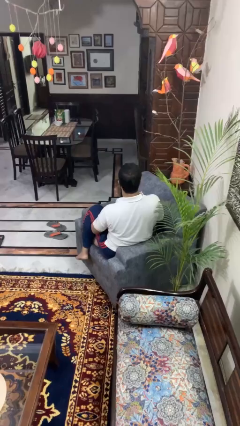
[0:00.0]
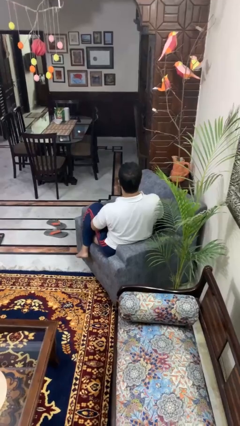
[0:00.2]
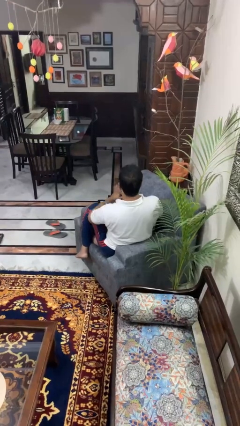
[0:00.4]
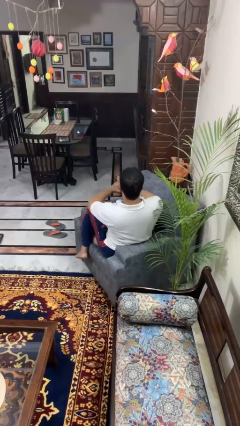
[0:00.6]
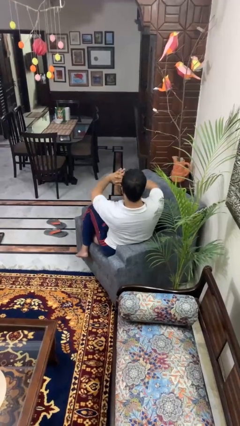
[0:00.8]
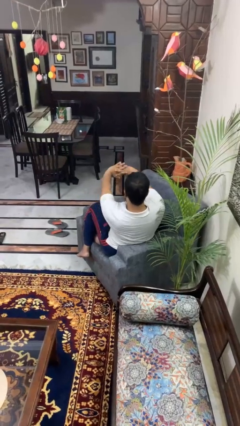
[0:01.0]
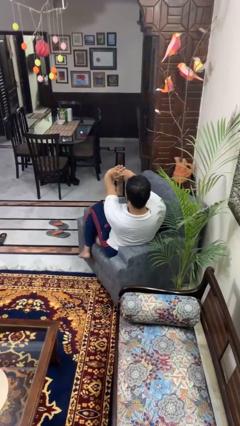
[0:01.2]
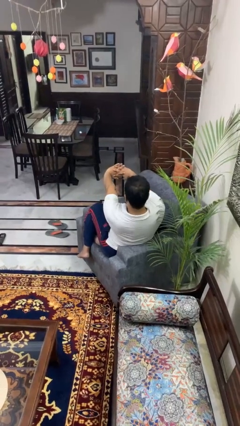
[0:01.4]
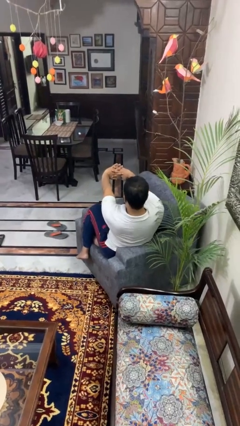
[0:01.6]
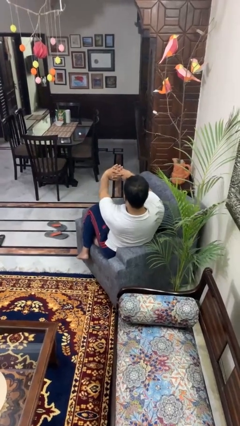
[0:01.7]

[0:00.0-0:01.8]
person cracks knuckles

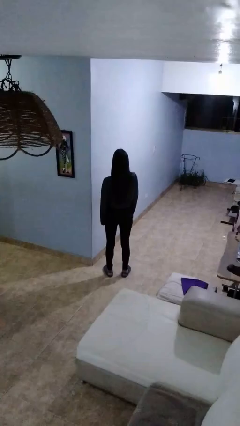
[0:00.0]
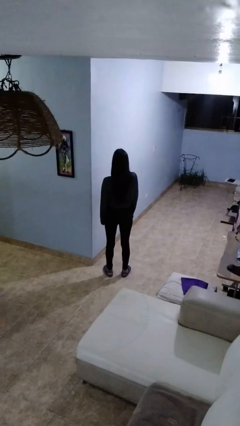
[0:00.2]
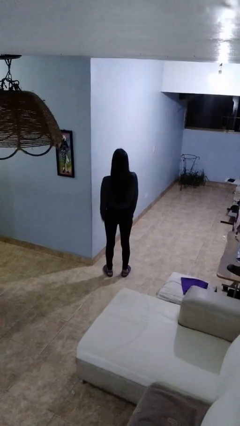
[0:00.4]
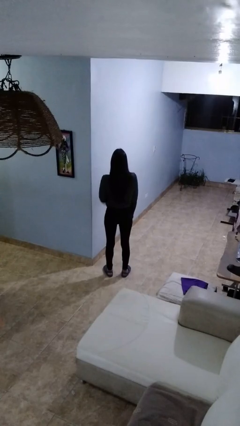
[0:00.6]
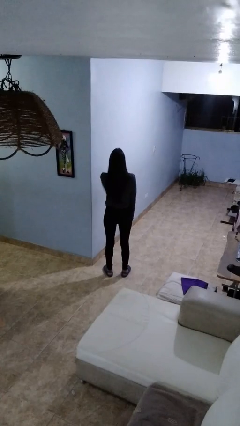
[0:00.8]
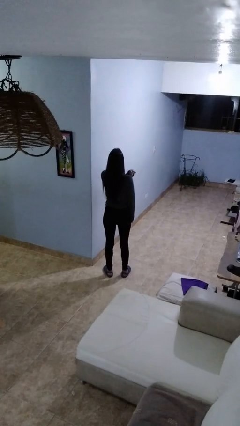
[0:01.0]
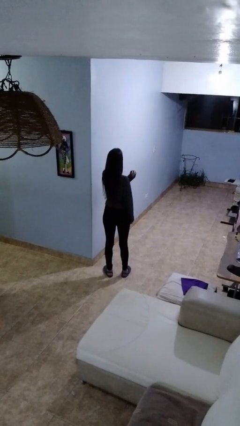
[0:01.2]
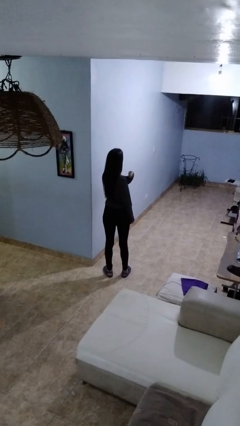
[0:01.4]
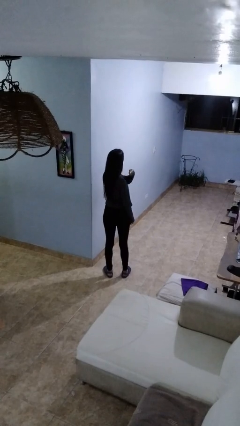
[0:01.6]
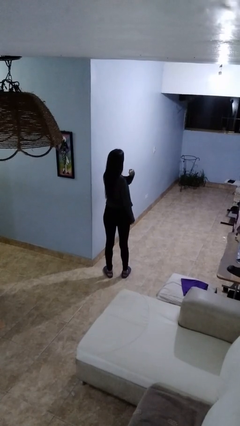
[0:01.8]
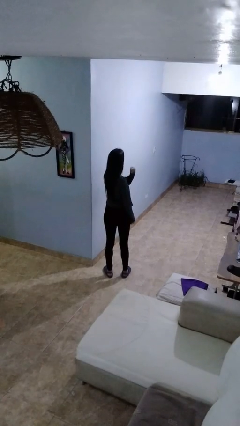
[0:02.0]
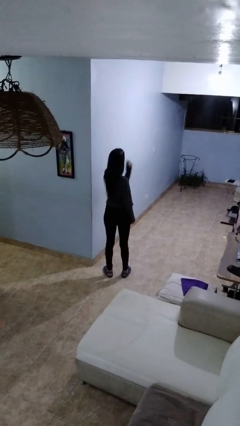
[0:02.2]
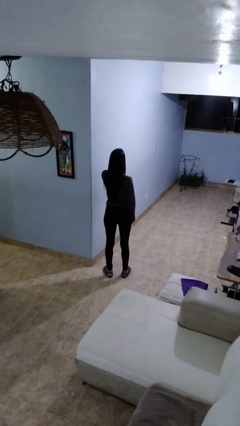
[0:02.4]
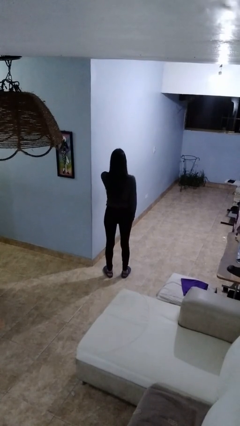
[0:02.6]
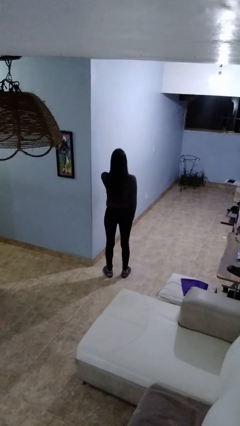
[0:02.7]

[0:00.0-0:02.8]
person gestures behind me

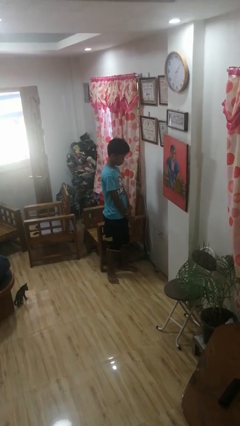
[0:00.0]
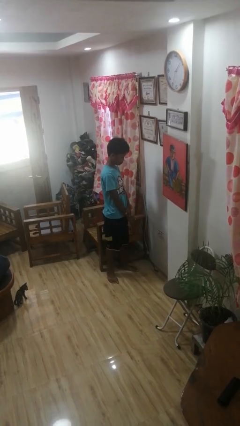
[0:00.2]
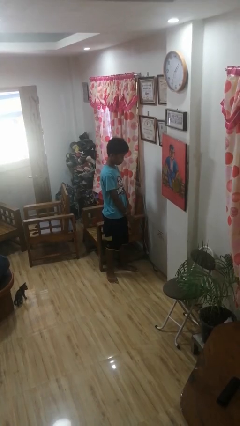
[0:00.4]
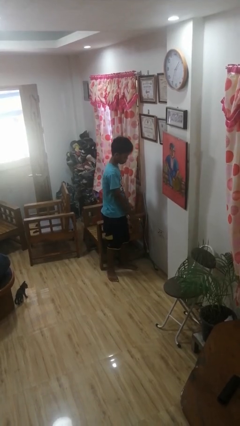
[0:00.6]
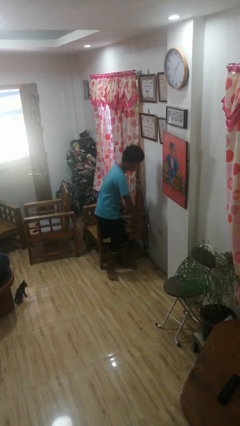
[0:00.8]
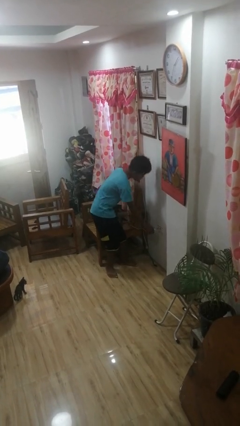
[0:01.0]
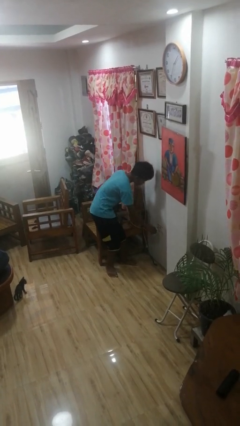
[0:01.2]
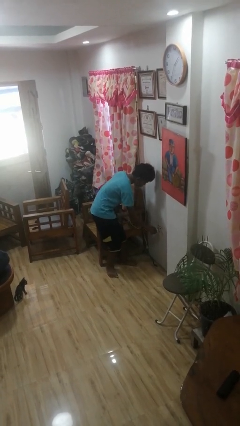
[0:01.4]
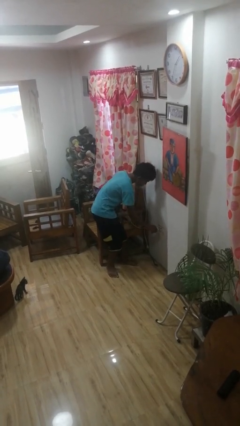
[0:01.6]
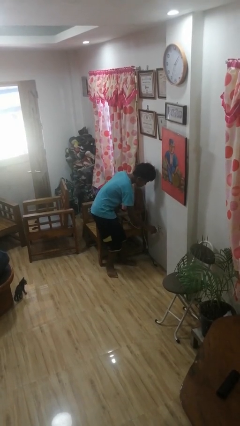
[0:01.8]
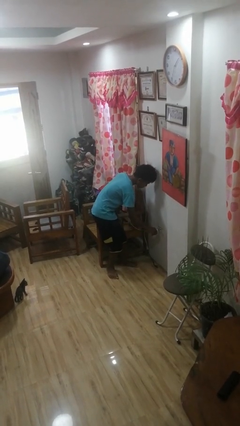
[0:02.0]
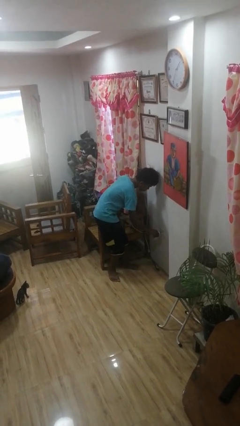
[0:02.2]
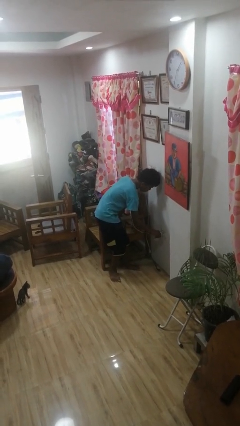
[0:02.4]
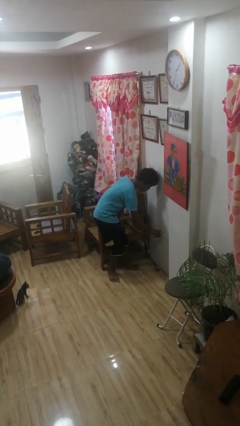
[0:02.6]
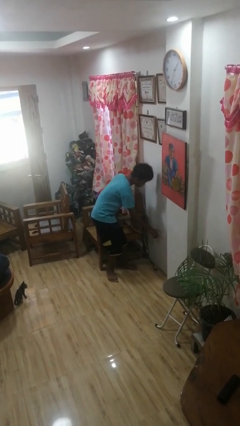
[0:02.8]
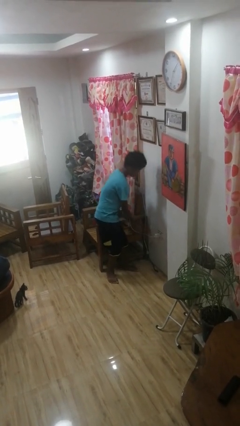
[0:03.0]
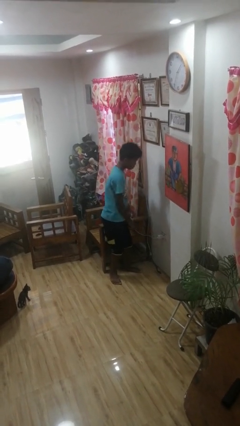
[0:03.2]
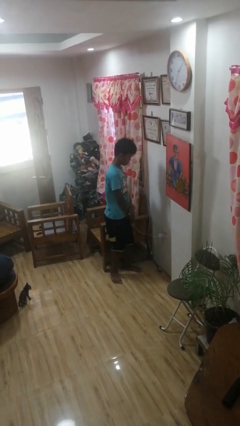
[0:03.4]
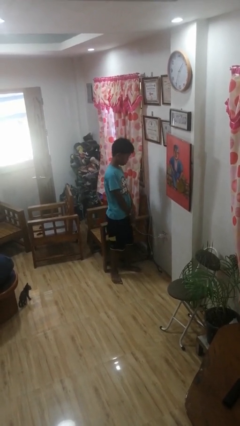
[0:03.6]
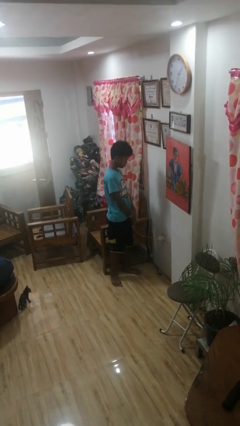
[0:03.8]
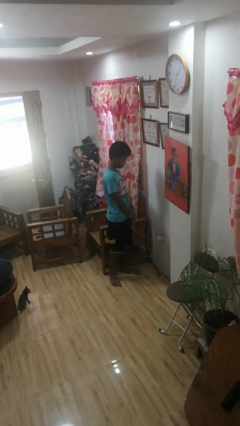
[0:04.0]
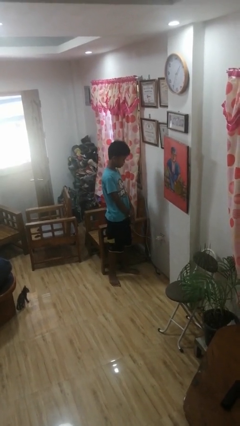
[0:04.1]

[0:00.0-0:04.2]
person plugs into electrical socket

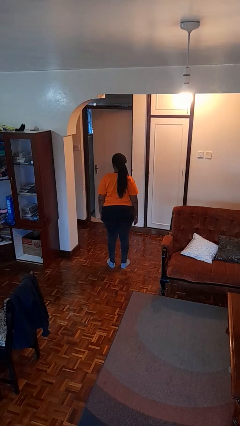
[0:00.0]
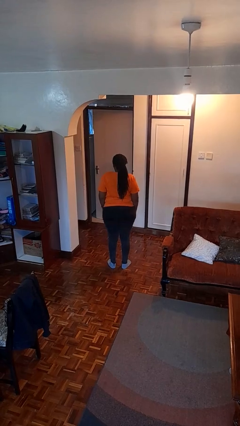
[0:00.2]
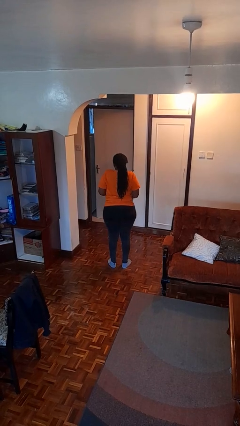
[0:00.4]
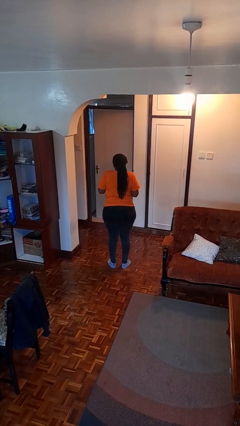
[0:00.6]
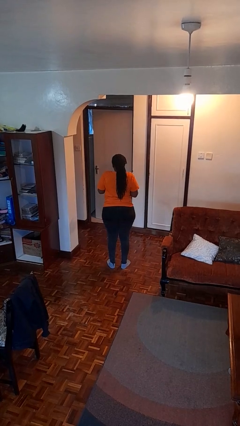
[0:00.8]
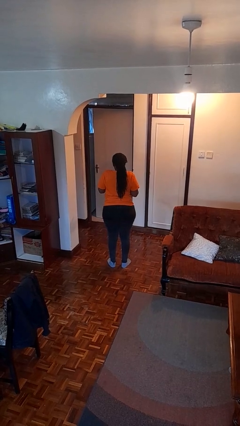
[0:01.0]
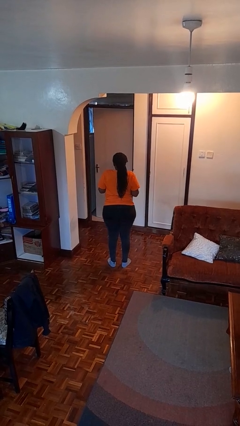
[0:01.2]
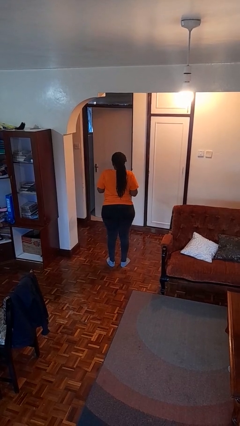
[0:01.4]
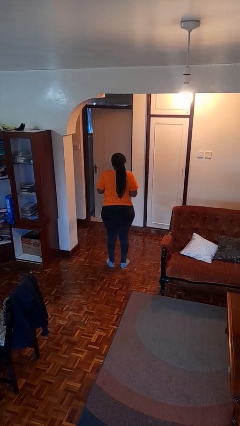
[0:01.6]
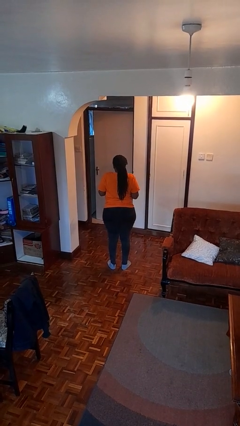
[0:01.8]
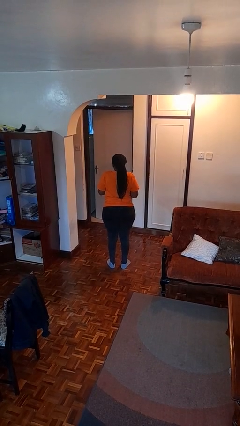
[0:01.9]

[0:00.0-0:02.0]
person shrugs

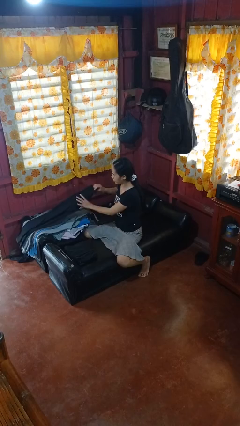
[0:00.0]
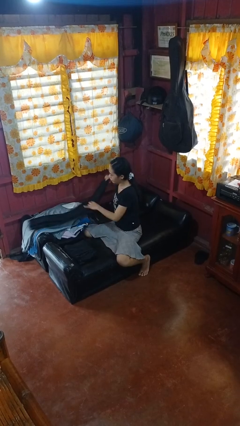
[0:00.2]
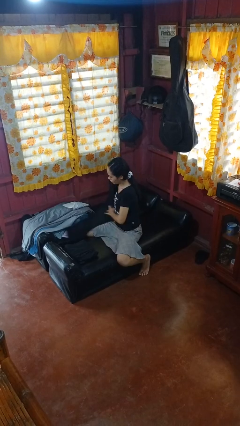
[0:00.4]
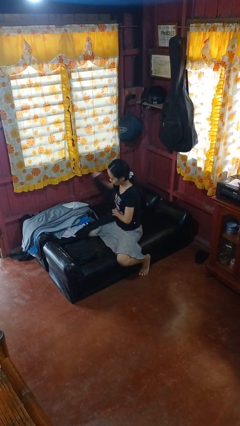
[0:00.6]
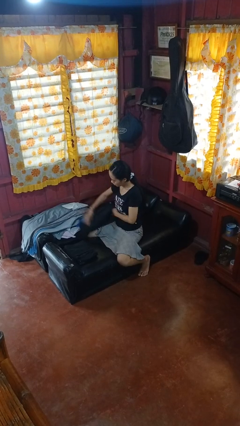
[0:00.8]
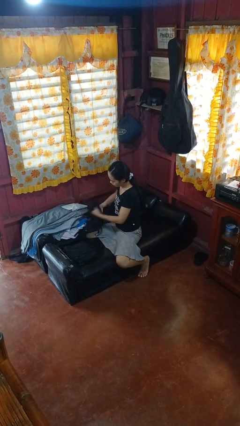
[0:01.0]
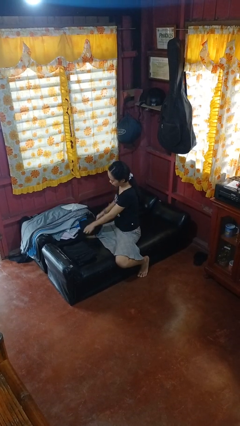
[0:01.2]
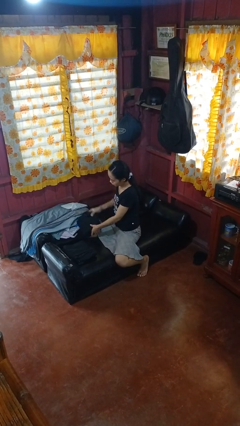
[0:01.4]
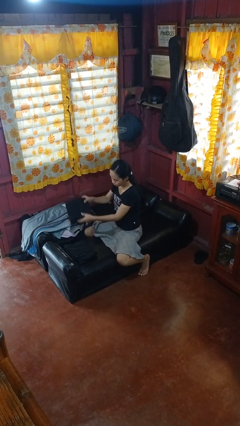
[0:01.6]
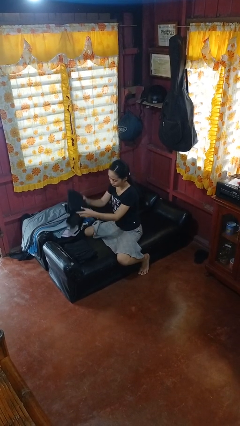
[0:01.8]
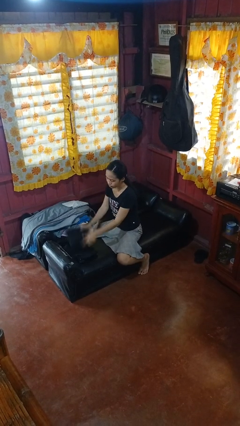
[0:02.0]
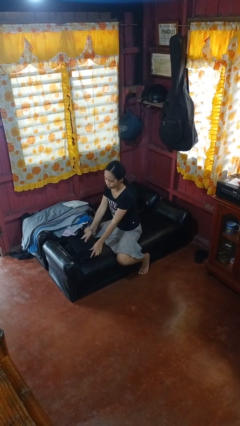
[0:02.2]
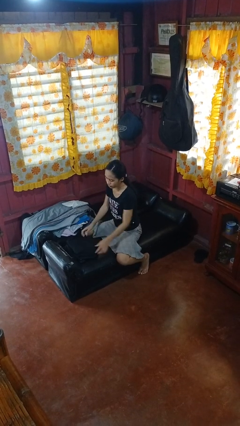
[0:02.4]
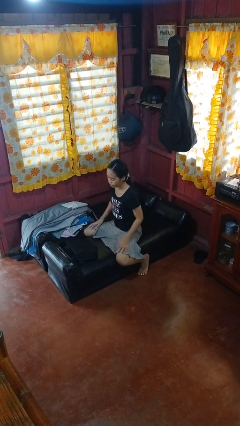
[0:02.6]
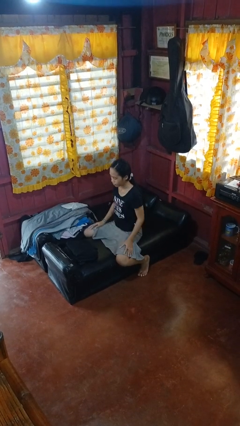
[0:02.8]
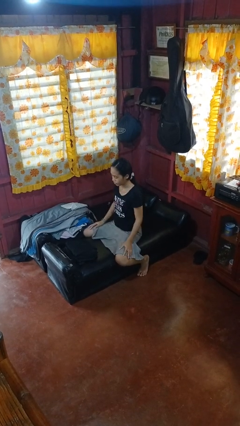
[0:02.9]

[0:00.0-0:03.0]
person folds pants

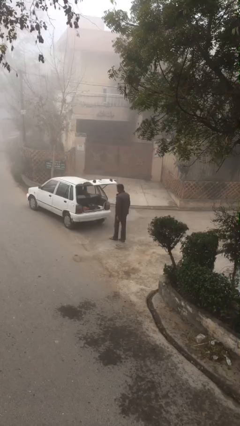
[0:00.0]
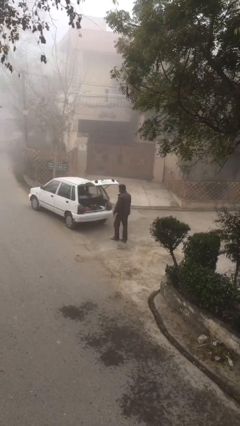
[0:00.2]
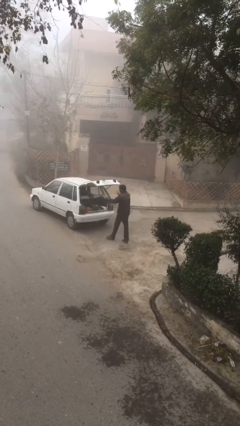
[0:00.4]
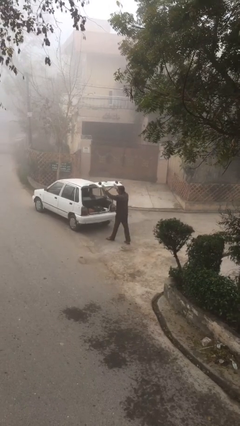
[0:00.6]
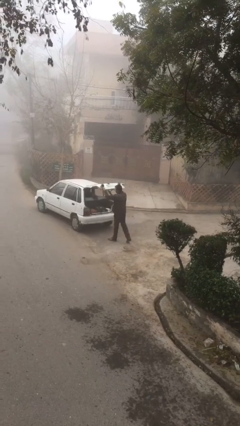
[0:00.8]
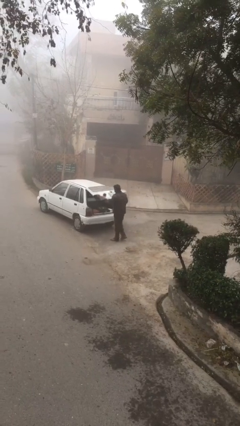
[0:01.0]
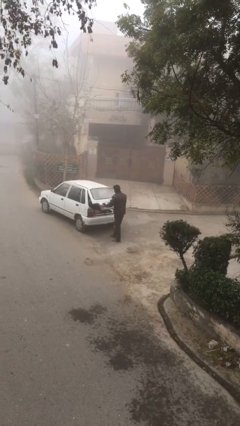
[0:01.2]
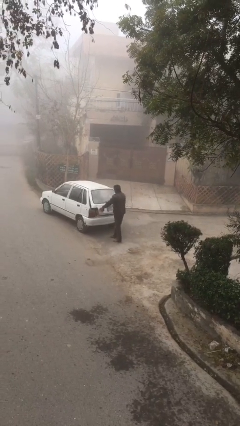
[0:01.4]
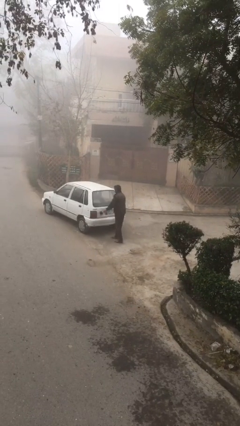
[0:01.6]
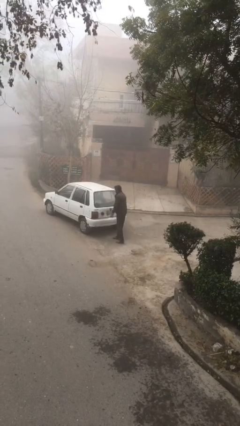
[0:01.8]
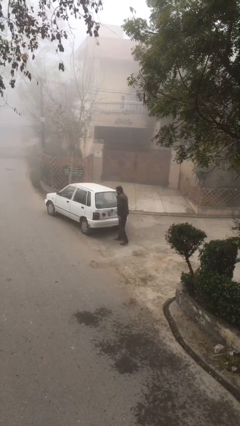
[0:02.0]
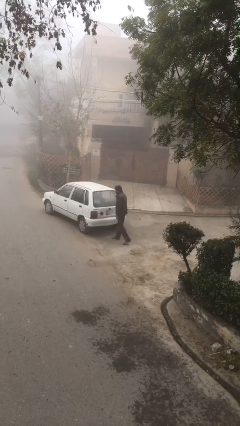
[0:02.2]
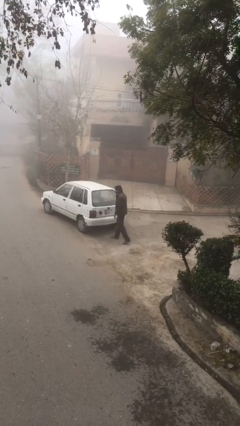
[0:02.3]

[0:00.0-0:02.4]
person closes car trunk

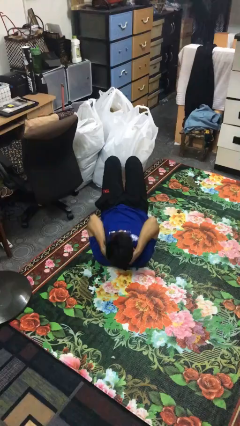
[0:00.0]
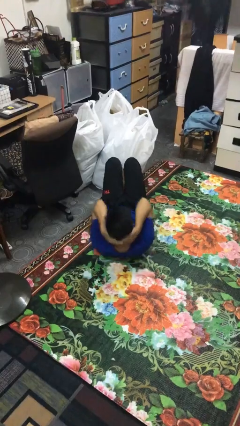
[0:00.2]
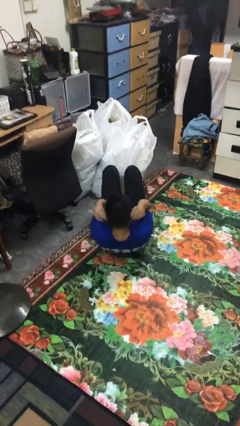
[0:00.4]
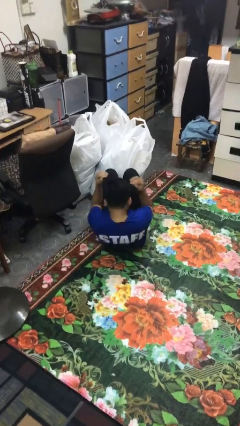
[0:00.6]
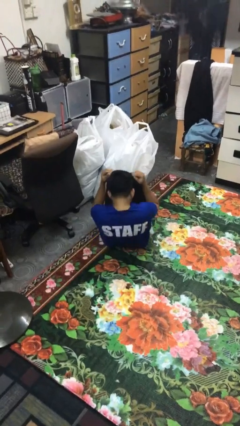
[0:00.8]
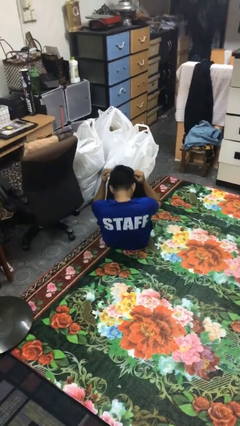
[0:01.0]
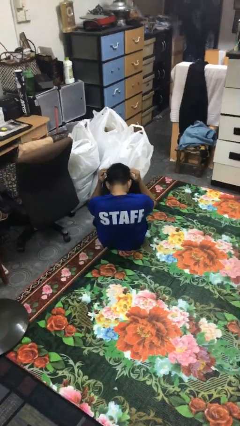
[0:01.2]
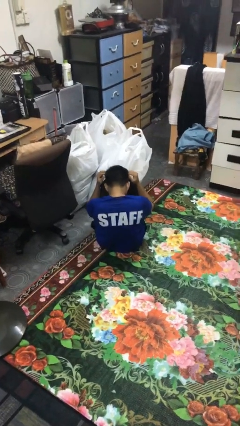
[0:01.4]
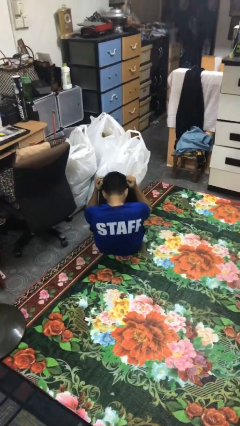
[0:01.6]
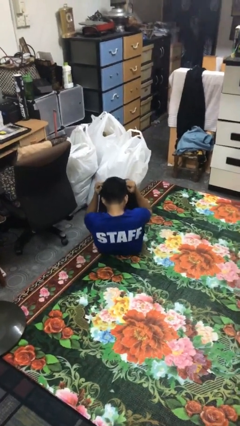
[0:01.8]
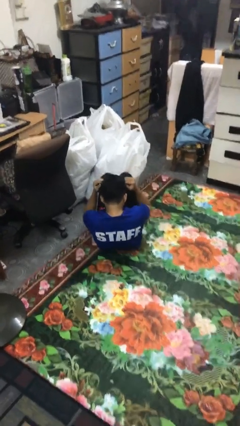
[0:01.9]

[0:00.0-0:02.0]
person exercises with situp
